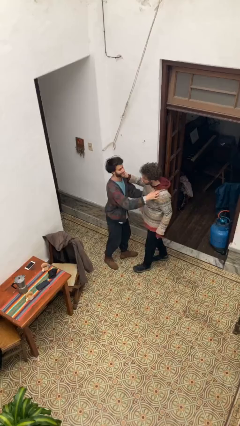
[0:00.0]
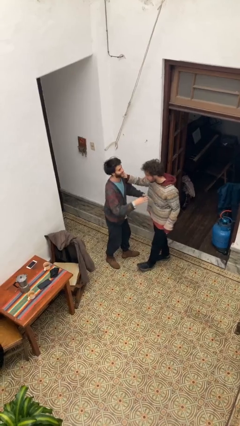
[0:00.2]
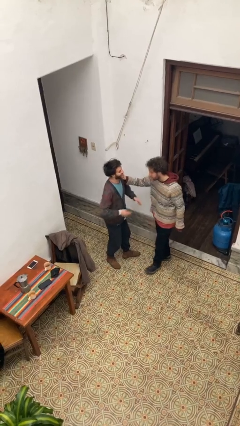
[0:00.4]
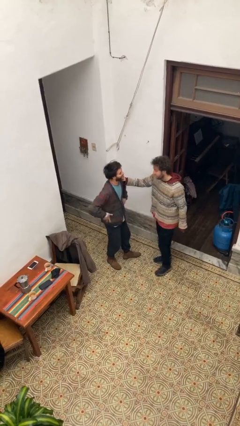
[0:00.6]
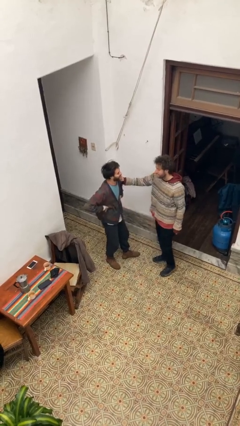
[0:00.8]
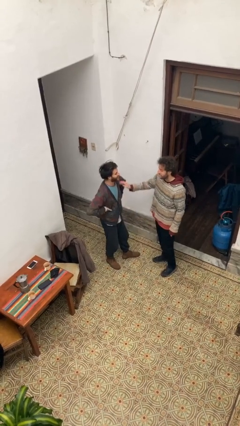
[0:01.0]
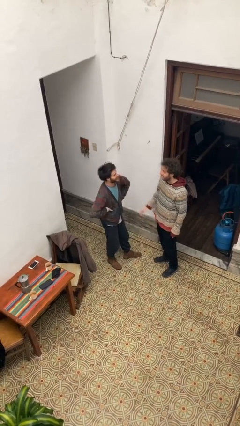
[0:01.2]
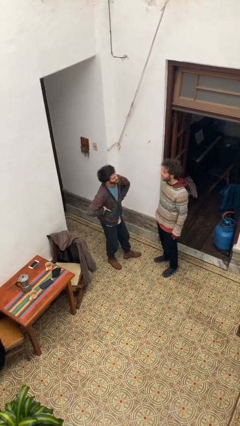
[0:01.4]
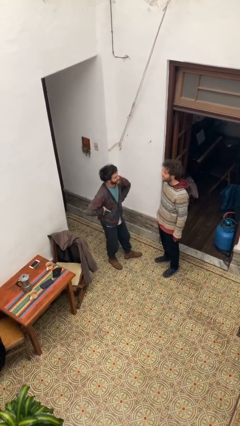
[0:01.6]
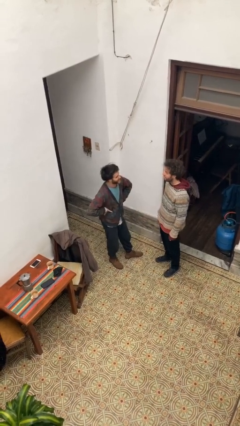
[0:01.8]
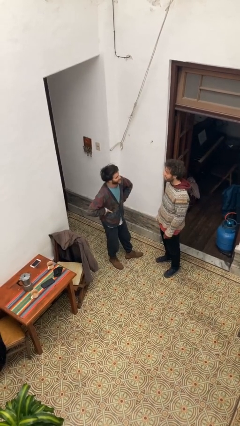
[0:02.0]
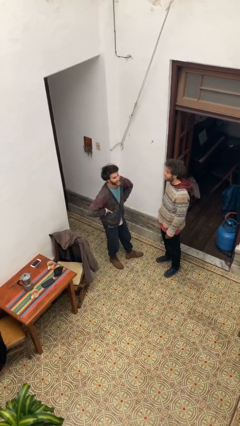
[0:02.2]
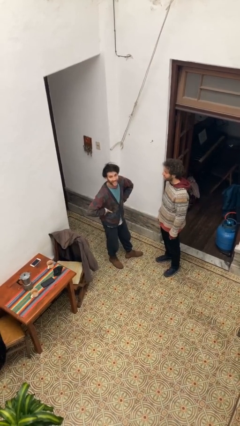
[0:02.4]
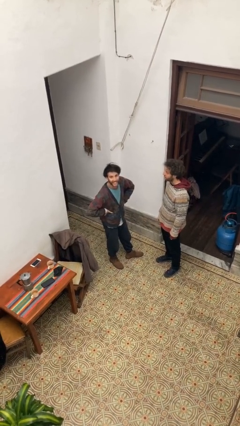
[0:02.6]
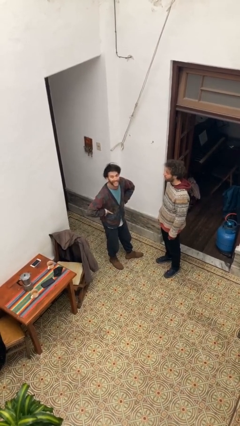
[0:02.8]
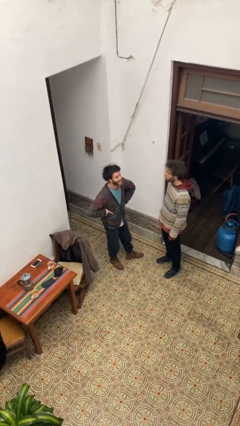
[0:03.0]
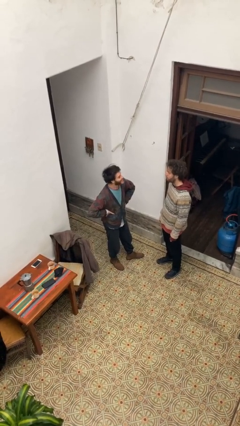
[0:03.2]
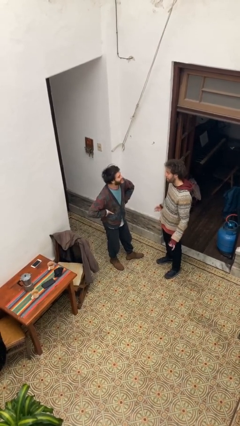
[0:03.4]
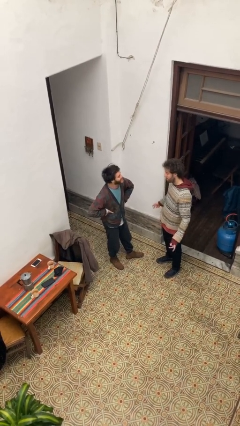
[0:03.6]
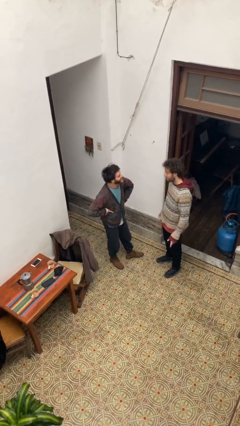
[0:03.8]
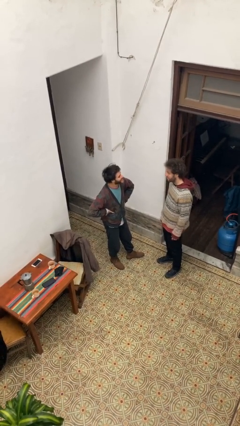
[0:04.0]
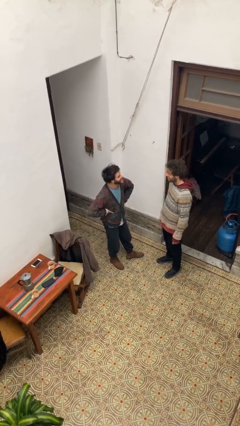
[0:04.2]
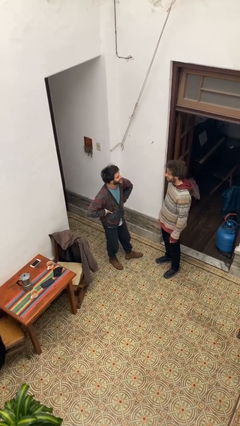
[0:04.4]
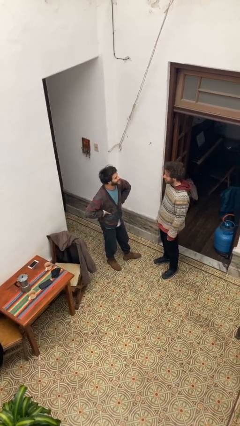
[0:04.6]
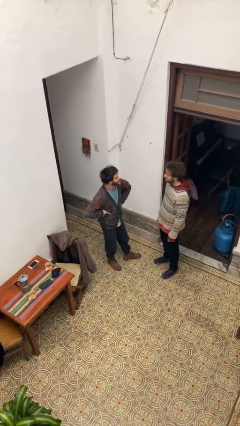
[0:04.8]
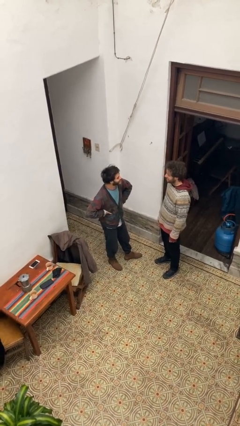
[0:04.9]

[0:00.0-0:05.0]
person talks to person

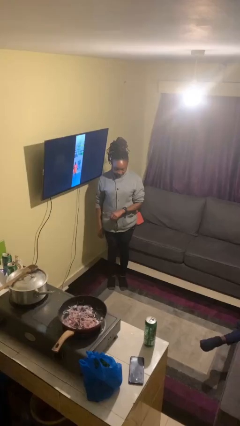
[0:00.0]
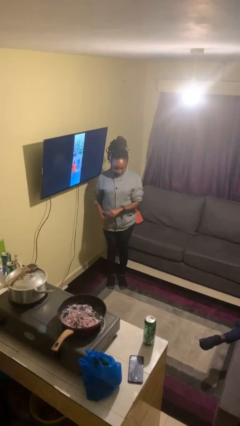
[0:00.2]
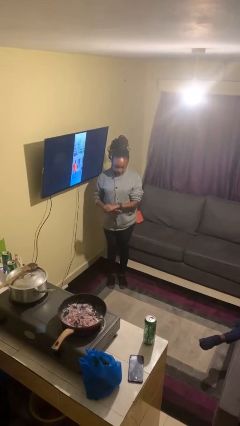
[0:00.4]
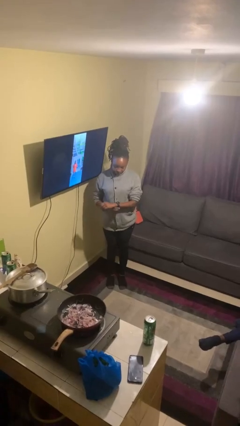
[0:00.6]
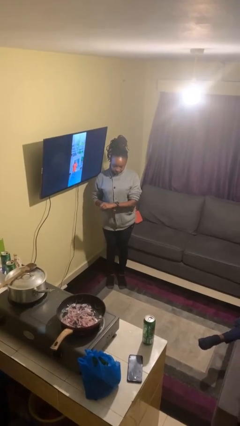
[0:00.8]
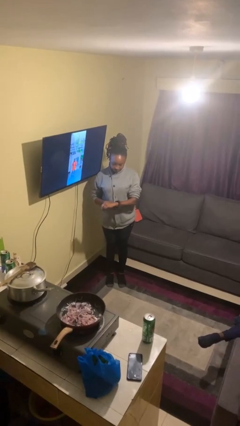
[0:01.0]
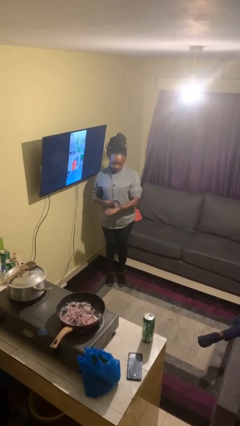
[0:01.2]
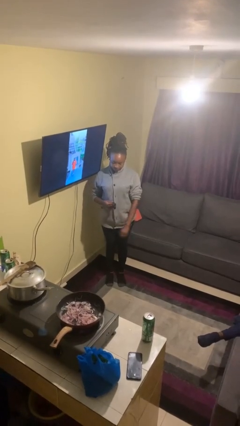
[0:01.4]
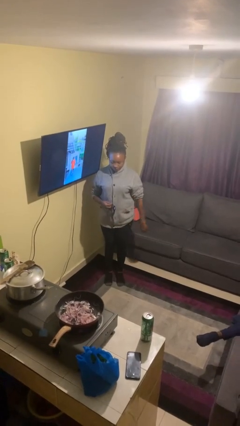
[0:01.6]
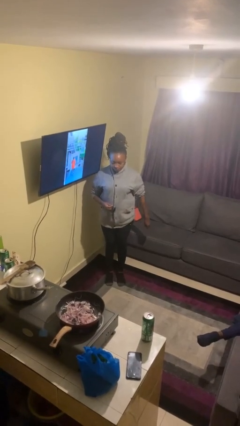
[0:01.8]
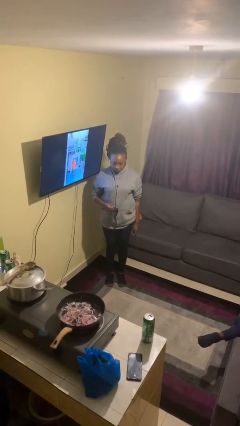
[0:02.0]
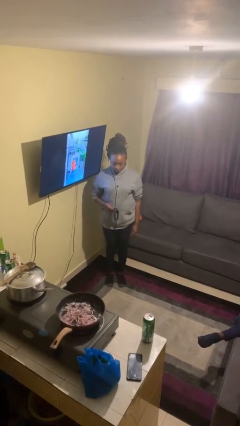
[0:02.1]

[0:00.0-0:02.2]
person takes off wristwatch

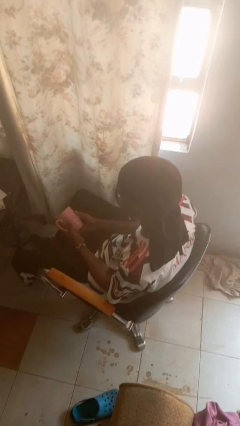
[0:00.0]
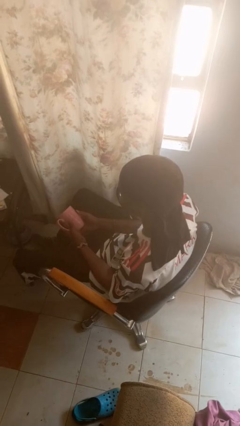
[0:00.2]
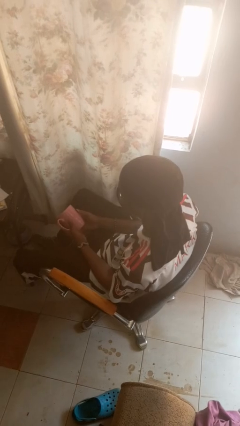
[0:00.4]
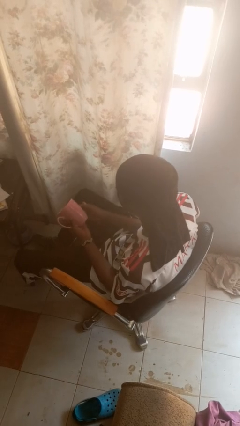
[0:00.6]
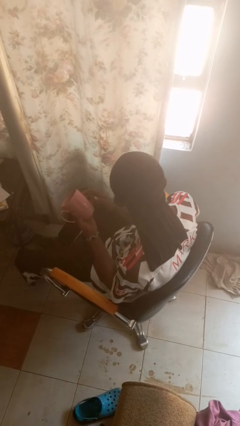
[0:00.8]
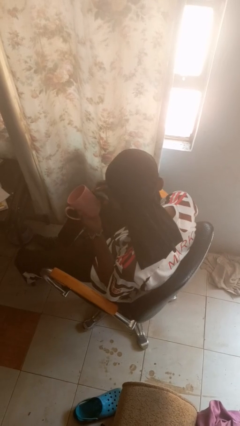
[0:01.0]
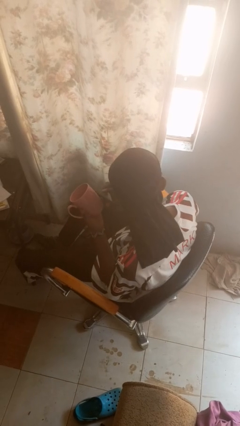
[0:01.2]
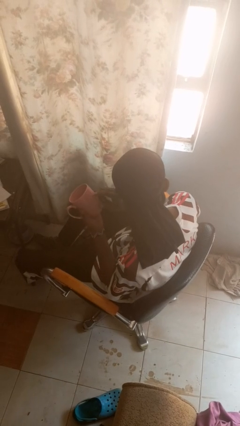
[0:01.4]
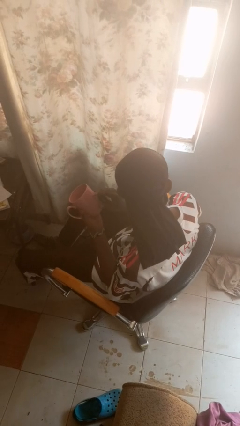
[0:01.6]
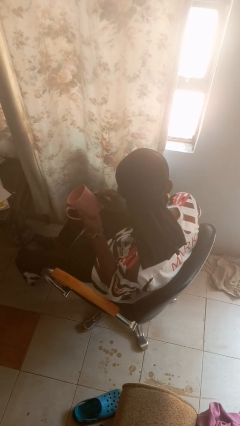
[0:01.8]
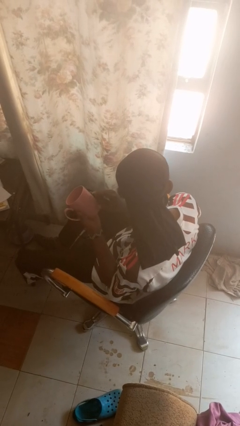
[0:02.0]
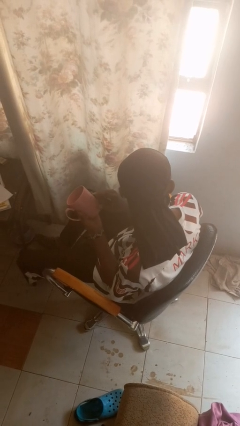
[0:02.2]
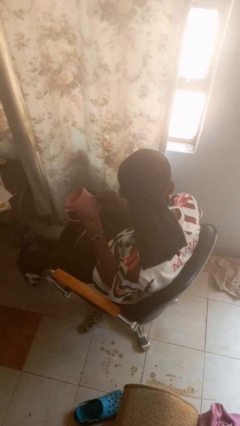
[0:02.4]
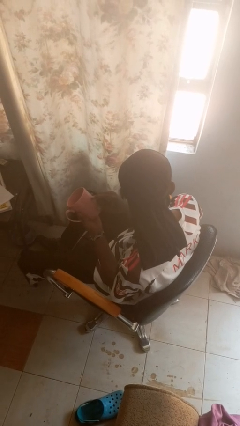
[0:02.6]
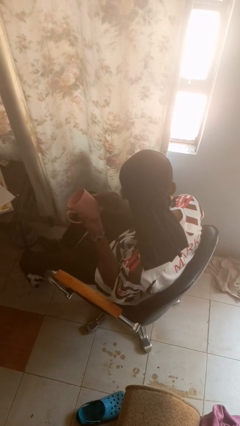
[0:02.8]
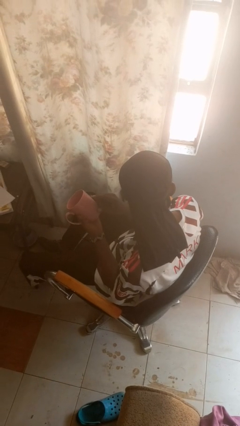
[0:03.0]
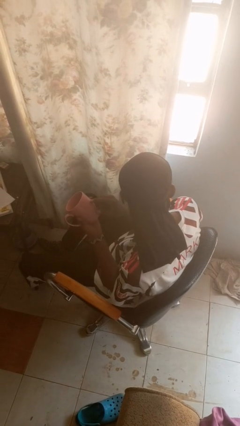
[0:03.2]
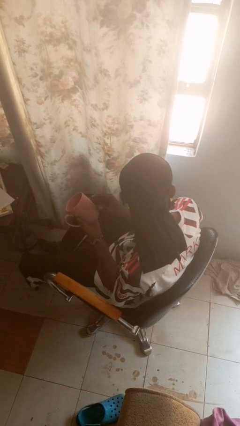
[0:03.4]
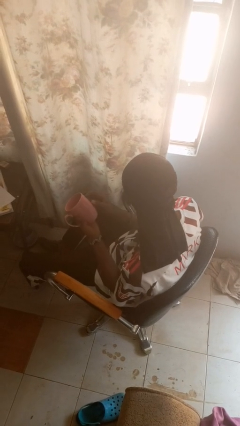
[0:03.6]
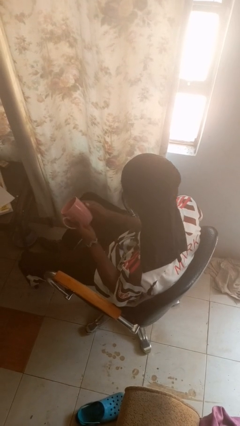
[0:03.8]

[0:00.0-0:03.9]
person taps object with finger

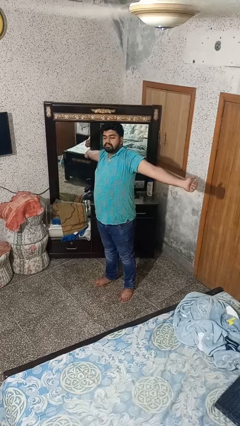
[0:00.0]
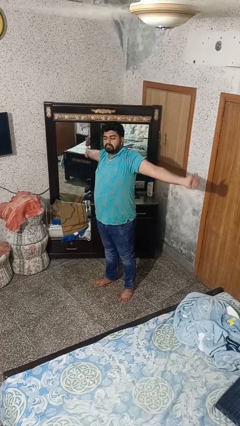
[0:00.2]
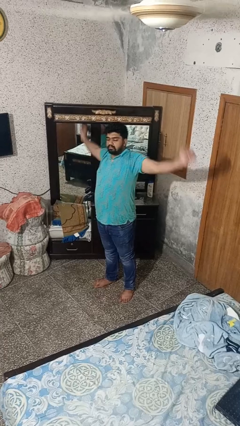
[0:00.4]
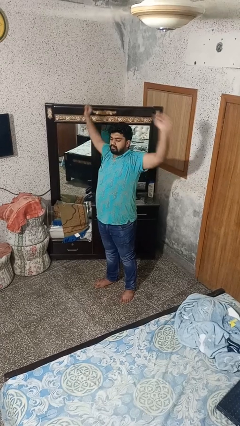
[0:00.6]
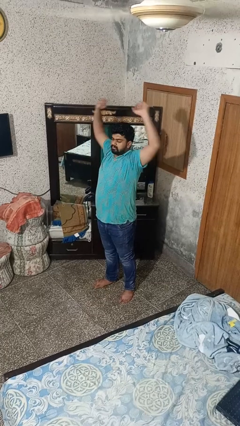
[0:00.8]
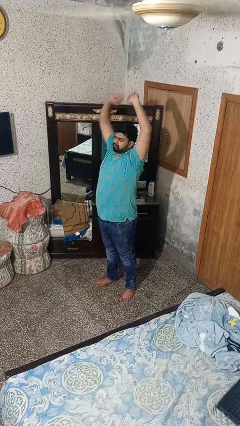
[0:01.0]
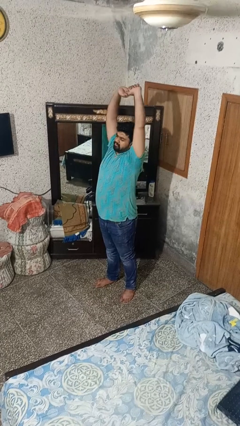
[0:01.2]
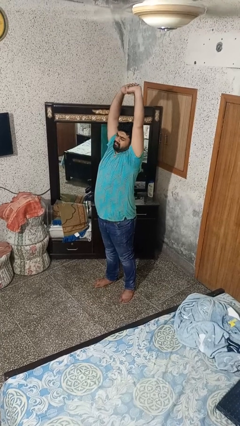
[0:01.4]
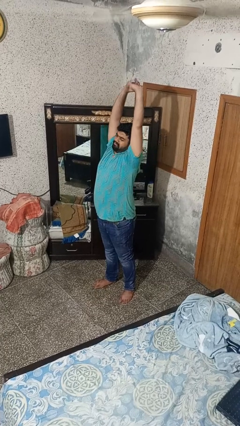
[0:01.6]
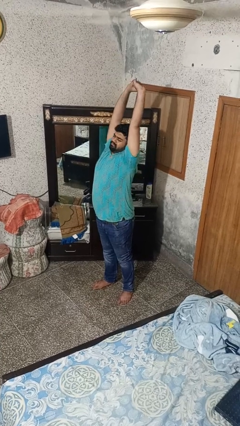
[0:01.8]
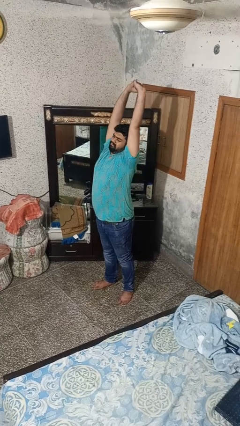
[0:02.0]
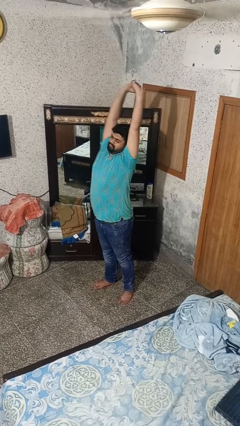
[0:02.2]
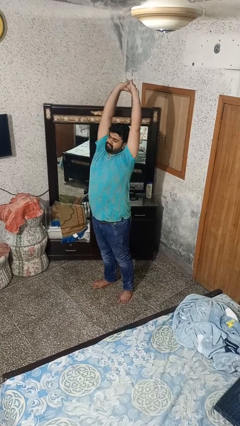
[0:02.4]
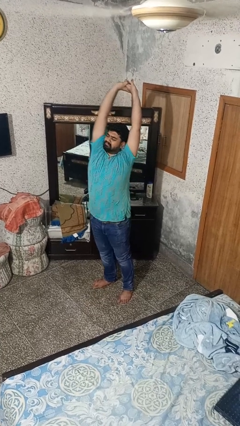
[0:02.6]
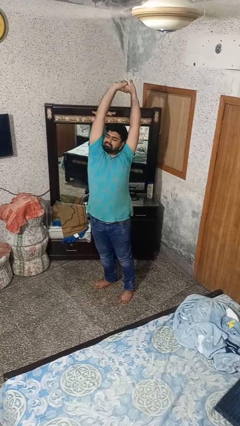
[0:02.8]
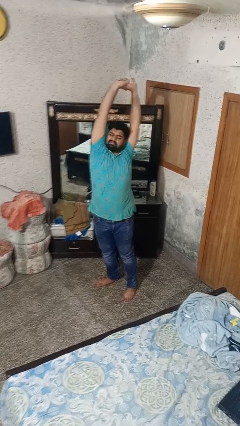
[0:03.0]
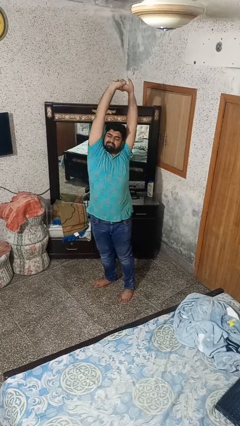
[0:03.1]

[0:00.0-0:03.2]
person stretches arms over head

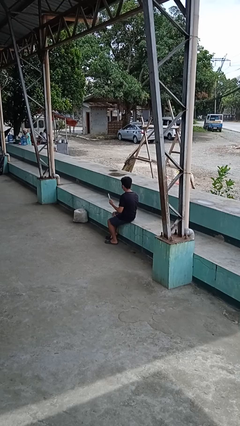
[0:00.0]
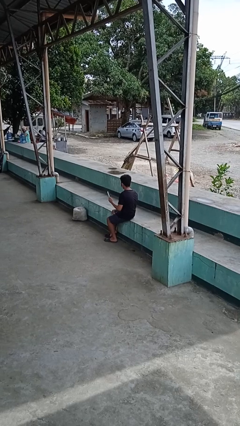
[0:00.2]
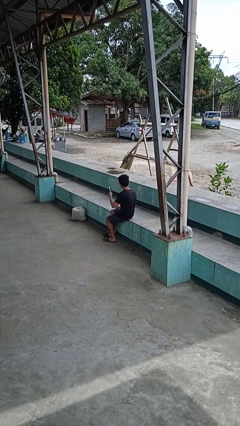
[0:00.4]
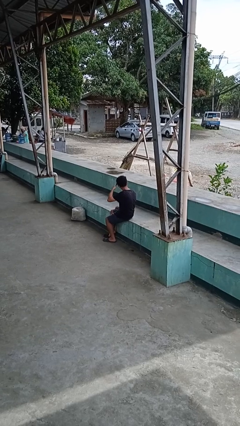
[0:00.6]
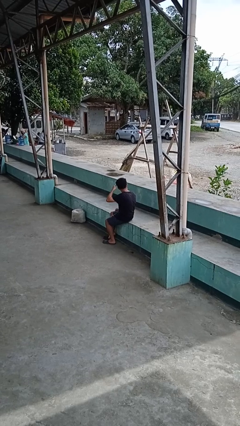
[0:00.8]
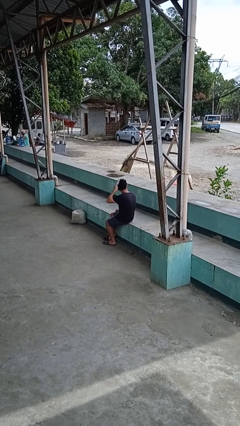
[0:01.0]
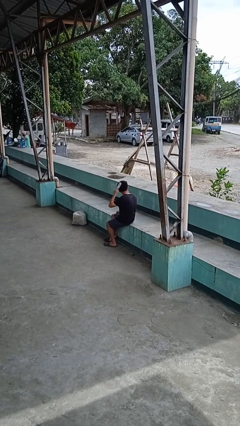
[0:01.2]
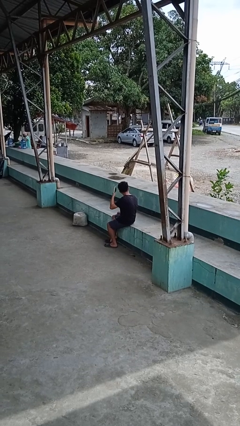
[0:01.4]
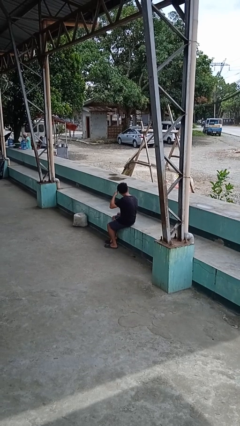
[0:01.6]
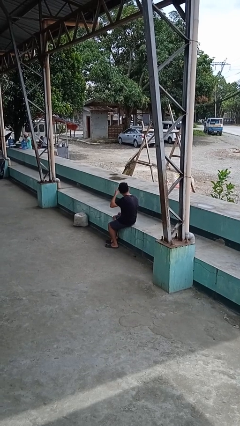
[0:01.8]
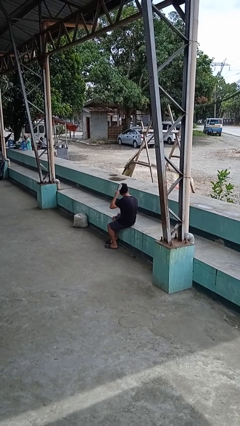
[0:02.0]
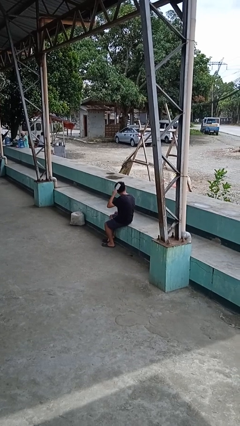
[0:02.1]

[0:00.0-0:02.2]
person brushes hair

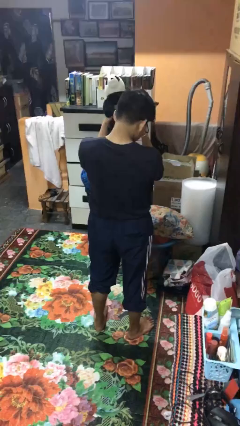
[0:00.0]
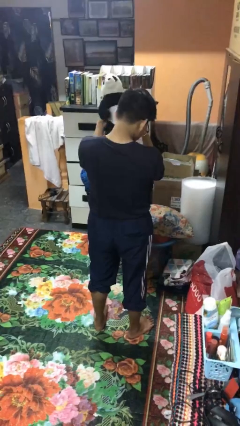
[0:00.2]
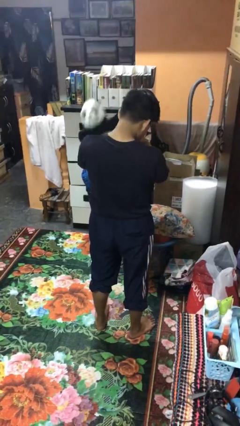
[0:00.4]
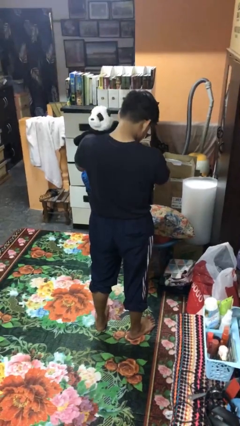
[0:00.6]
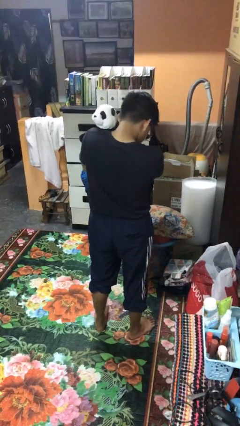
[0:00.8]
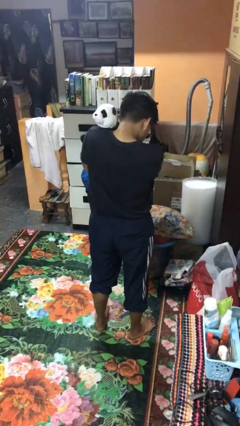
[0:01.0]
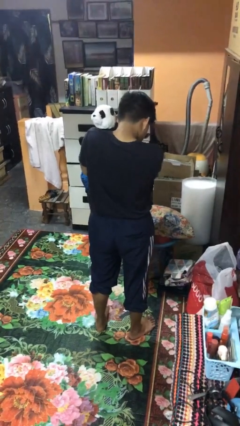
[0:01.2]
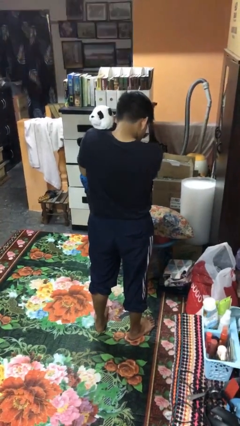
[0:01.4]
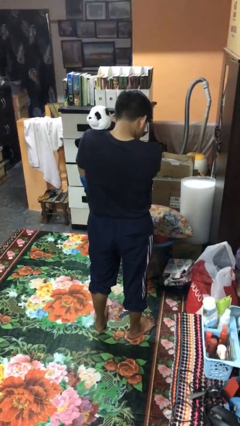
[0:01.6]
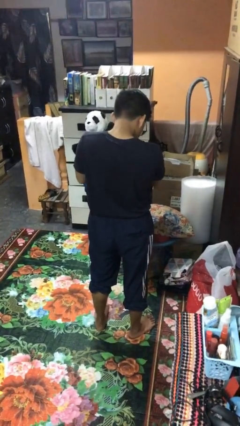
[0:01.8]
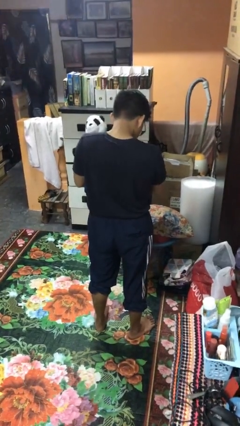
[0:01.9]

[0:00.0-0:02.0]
person hugs stuffed animal
